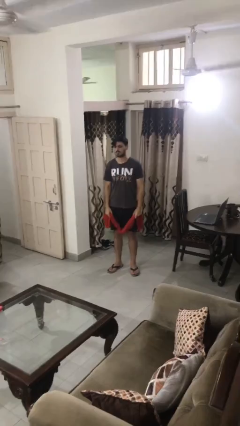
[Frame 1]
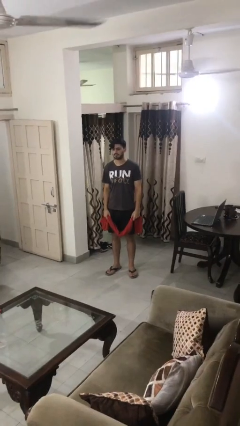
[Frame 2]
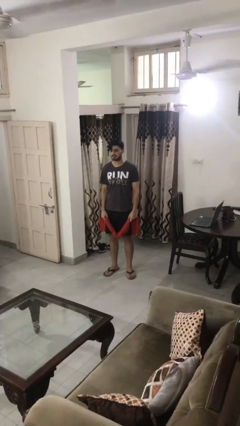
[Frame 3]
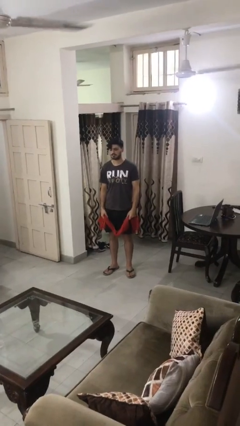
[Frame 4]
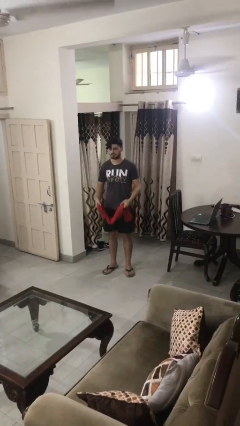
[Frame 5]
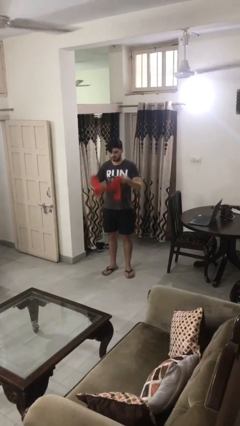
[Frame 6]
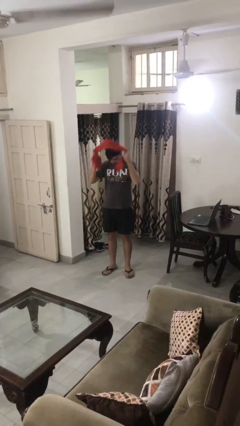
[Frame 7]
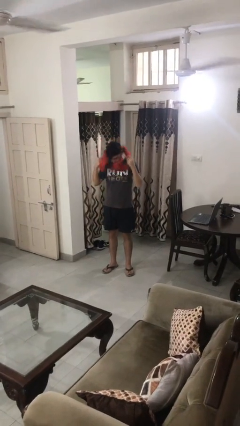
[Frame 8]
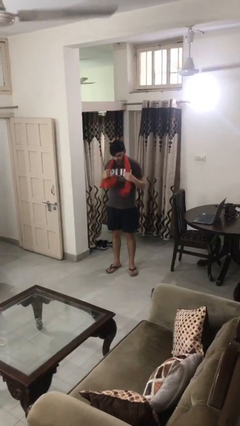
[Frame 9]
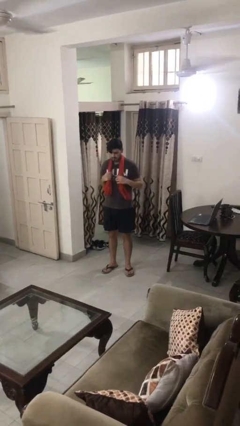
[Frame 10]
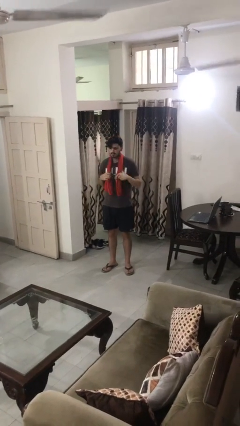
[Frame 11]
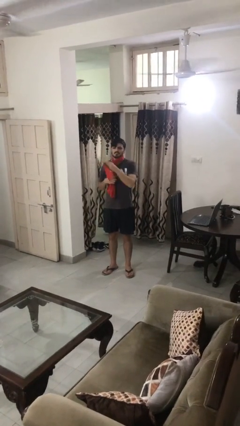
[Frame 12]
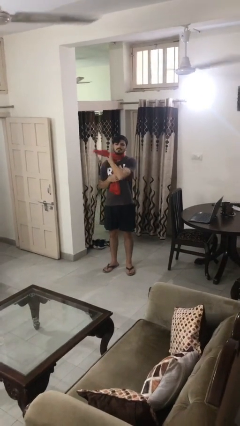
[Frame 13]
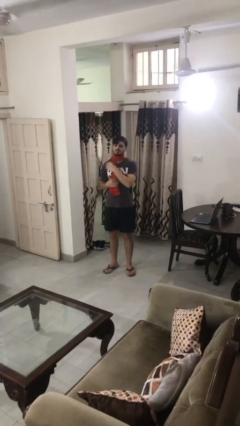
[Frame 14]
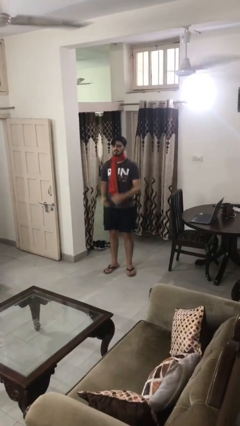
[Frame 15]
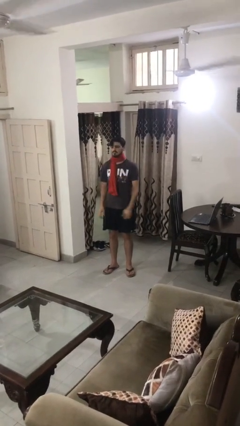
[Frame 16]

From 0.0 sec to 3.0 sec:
person puts on scarf

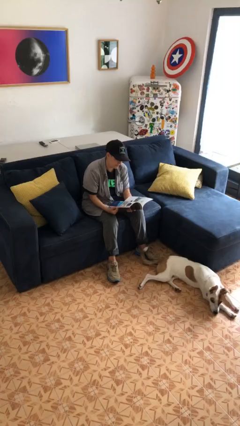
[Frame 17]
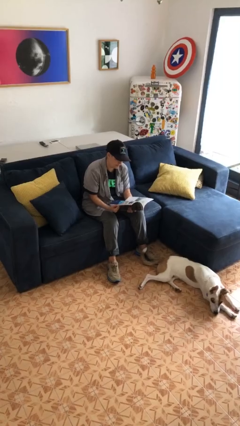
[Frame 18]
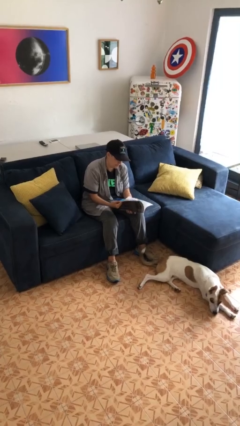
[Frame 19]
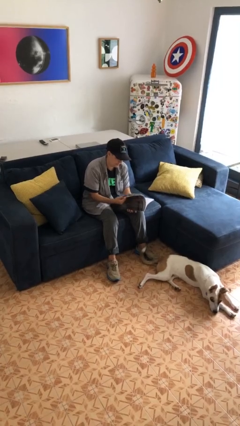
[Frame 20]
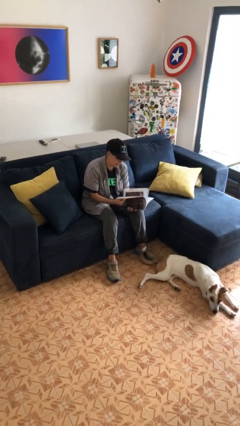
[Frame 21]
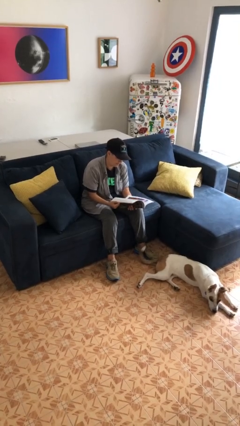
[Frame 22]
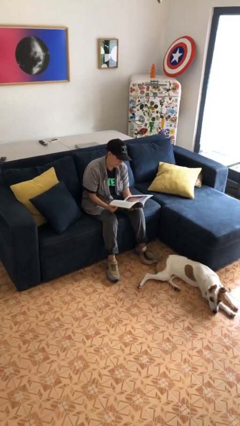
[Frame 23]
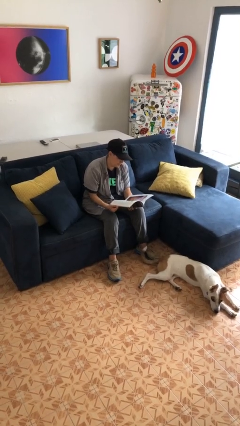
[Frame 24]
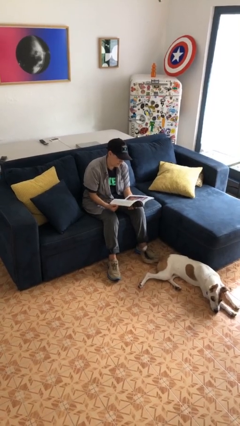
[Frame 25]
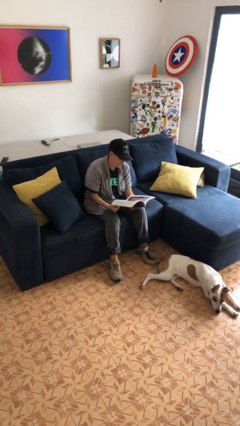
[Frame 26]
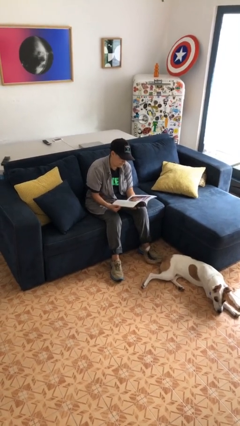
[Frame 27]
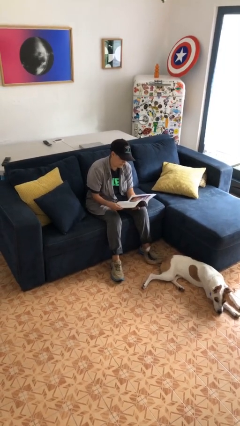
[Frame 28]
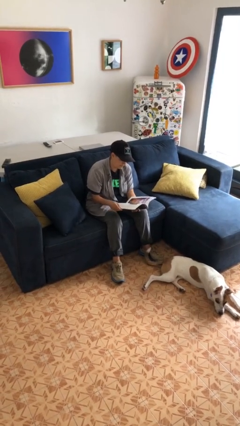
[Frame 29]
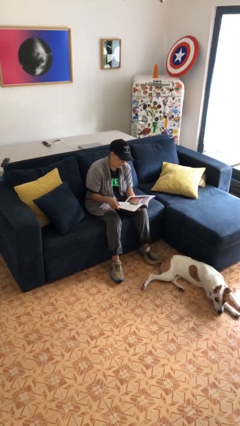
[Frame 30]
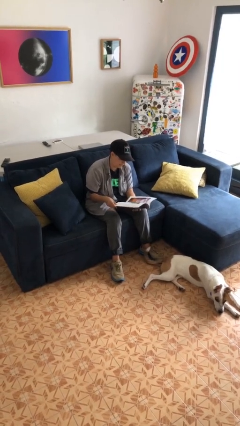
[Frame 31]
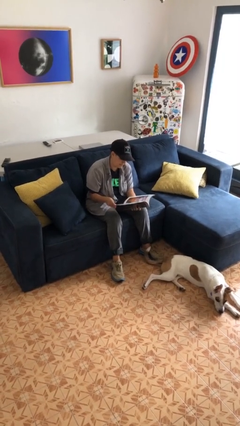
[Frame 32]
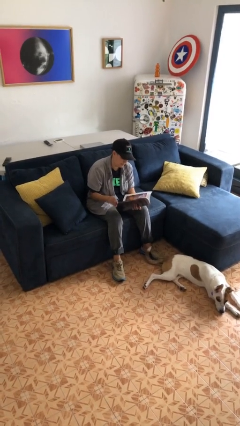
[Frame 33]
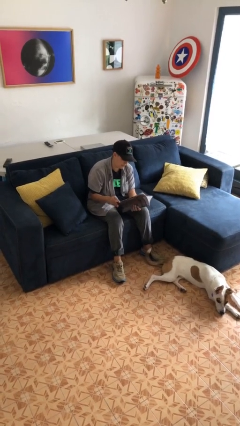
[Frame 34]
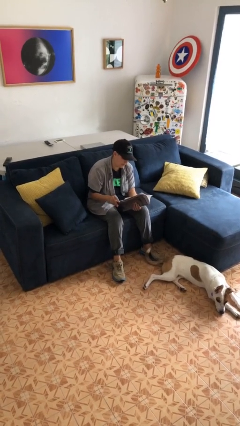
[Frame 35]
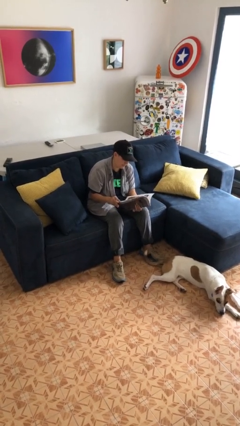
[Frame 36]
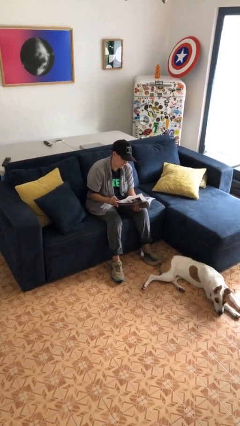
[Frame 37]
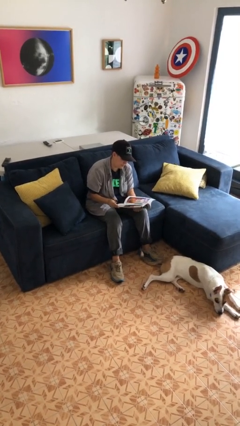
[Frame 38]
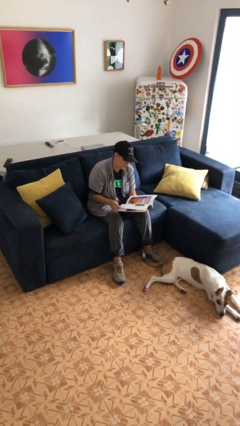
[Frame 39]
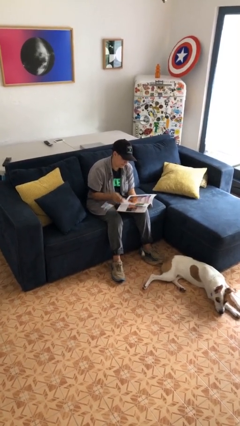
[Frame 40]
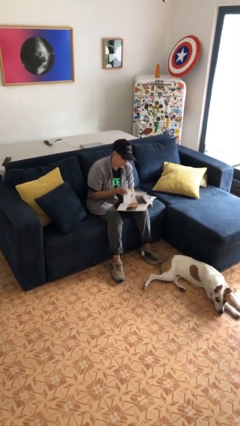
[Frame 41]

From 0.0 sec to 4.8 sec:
person reads magazine

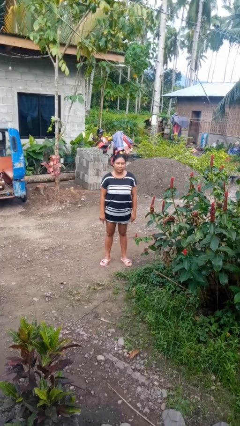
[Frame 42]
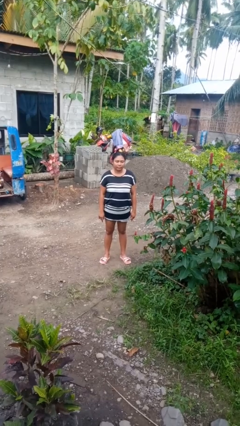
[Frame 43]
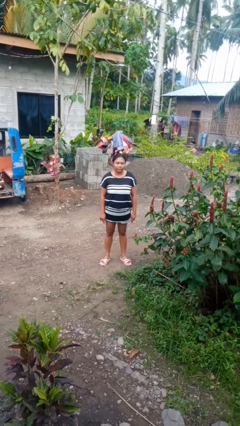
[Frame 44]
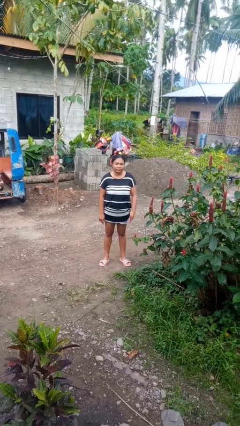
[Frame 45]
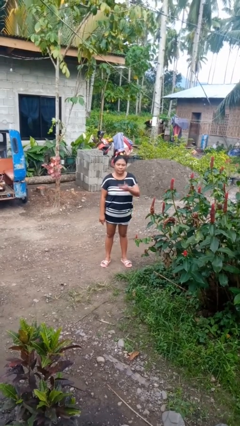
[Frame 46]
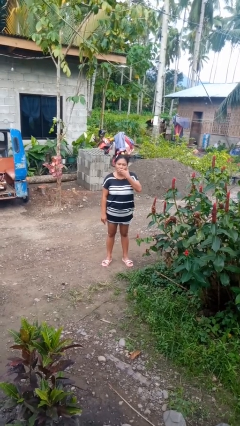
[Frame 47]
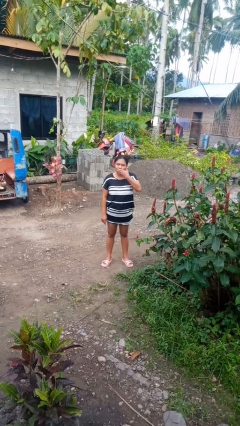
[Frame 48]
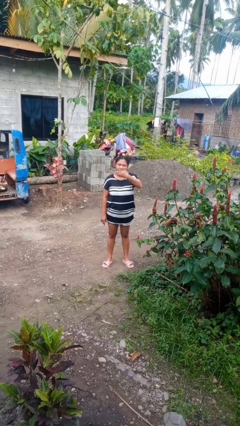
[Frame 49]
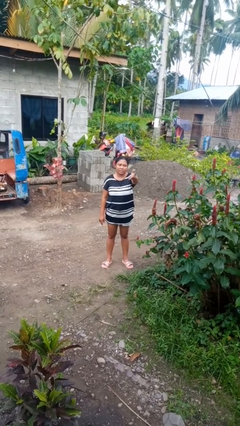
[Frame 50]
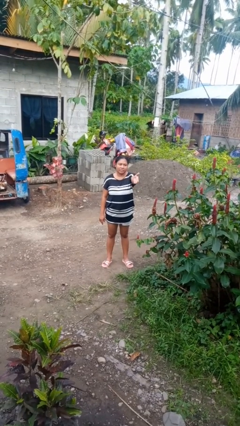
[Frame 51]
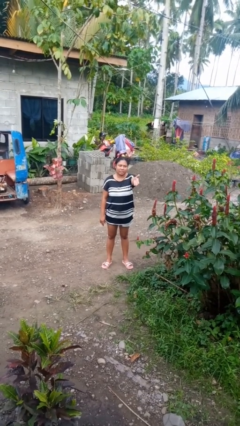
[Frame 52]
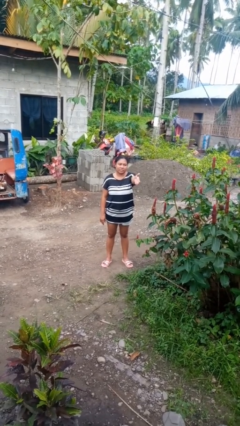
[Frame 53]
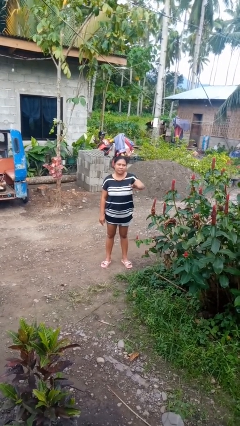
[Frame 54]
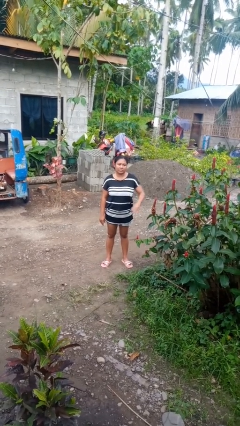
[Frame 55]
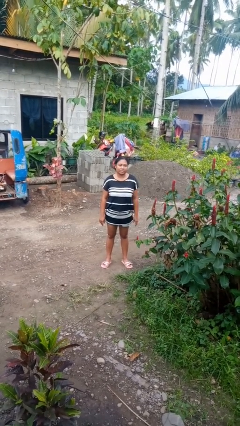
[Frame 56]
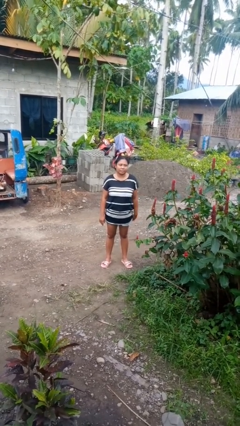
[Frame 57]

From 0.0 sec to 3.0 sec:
person gestures blow kiss

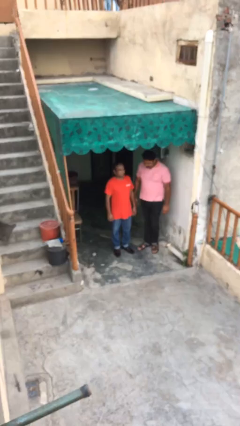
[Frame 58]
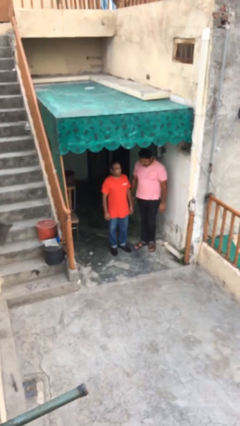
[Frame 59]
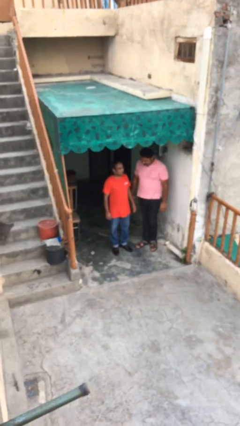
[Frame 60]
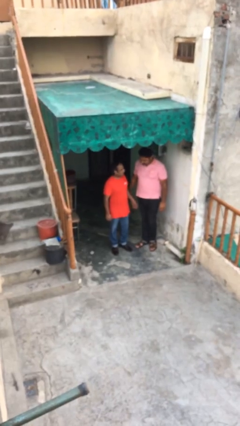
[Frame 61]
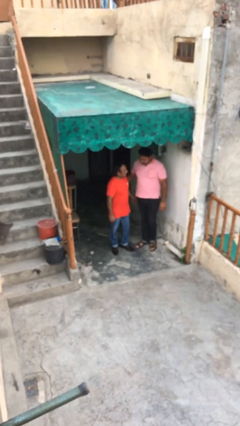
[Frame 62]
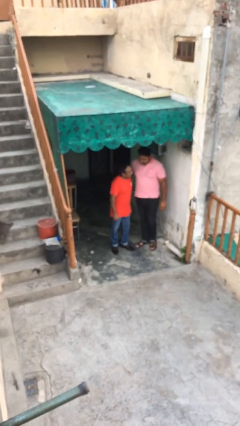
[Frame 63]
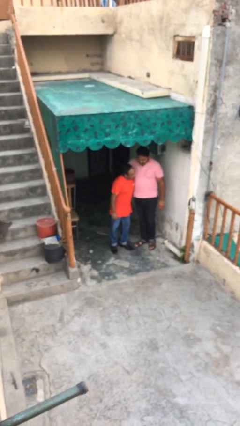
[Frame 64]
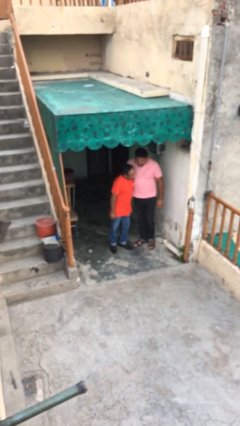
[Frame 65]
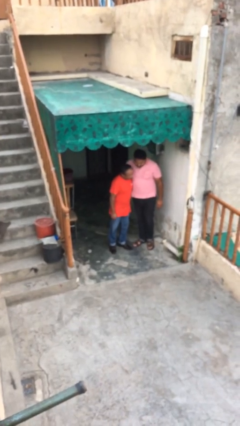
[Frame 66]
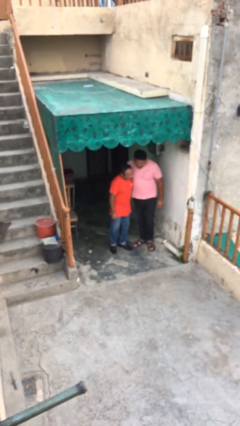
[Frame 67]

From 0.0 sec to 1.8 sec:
person embraces person

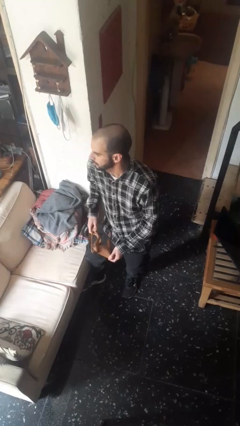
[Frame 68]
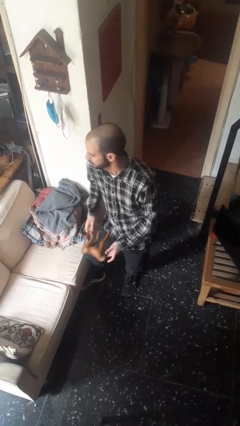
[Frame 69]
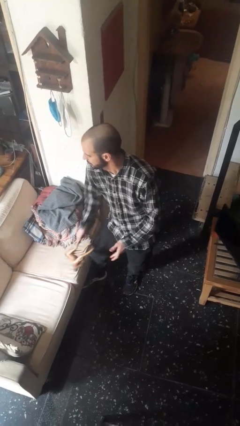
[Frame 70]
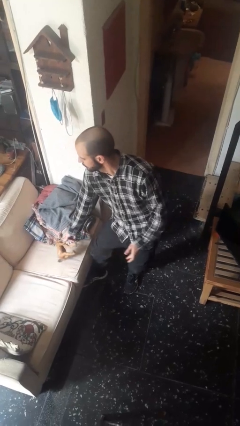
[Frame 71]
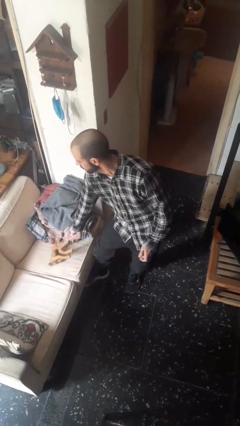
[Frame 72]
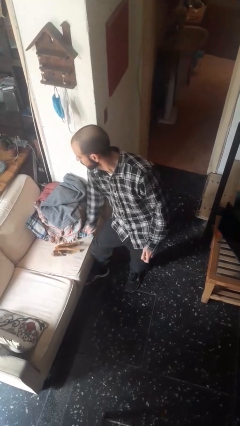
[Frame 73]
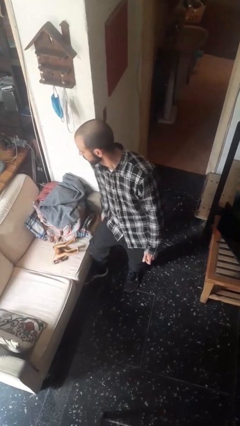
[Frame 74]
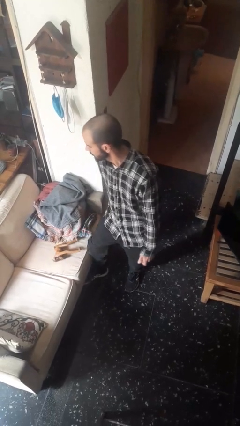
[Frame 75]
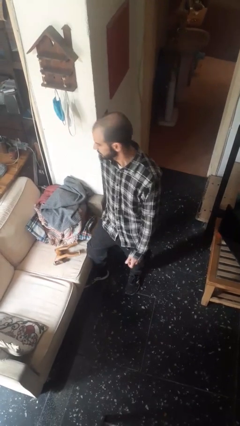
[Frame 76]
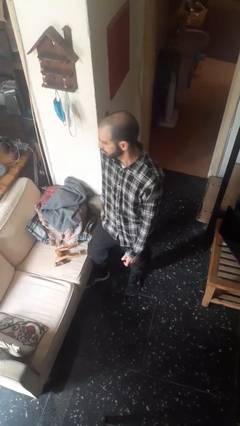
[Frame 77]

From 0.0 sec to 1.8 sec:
person puts down object on couch

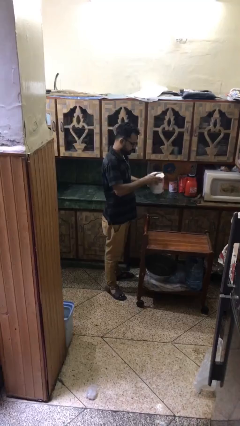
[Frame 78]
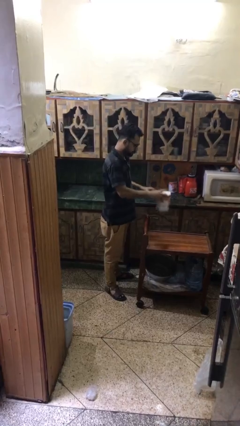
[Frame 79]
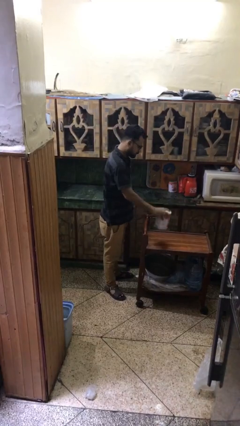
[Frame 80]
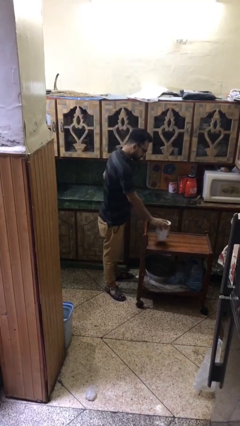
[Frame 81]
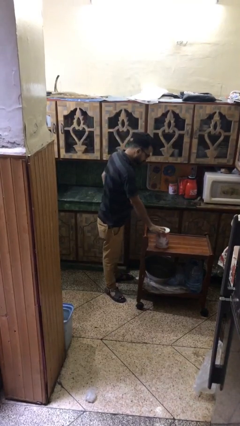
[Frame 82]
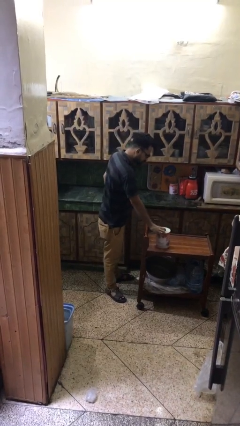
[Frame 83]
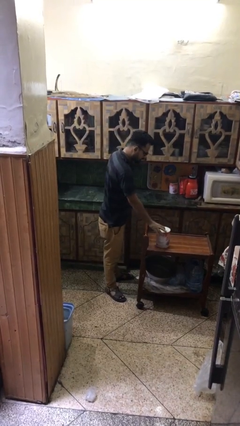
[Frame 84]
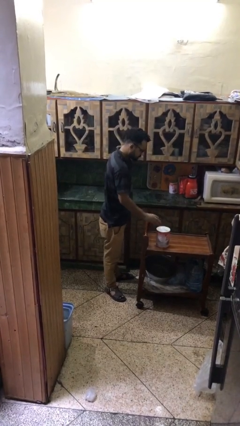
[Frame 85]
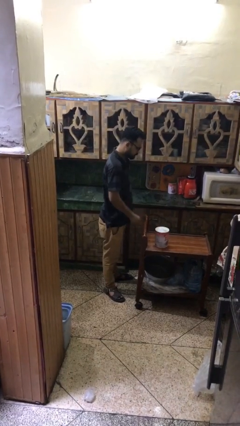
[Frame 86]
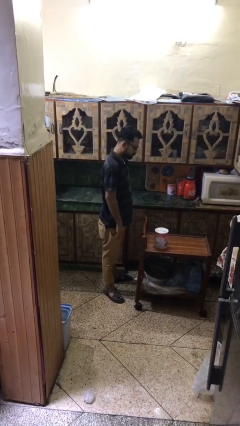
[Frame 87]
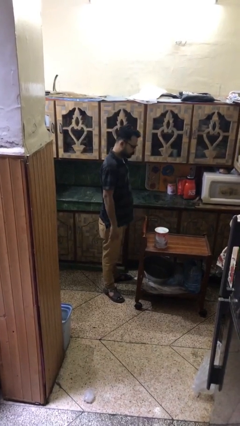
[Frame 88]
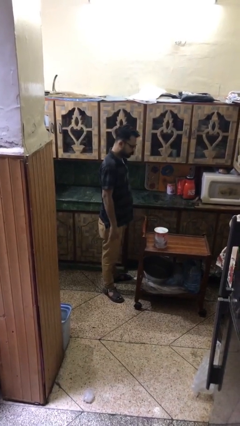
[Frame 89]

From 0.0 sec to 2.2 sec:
person puts down object on table

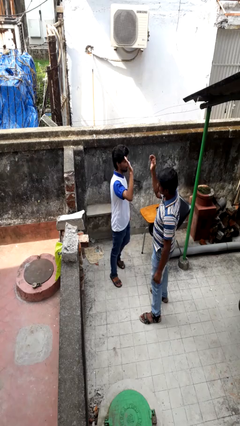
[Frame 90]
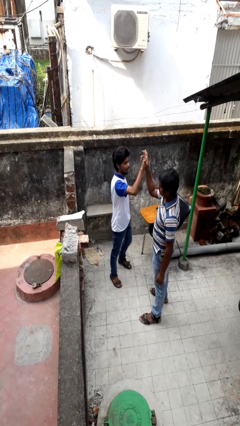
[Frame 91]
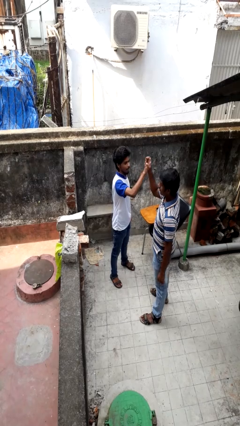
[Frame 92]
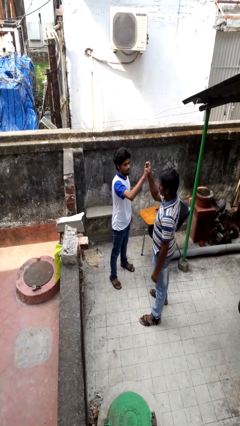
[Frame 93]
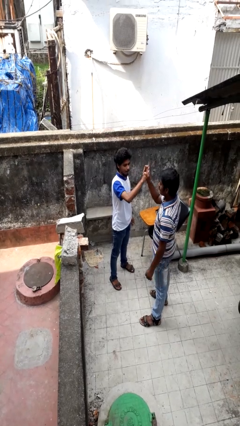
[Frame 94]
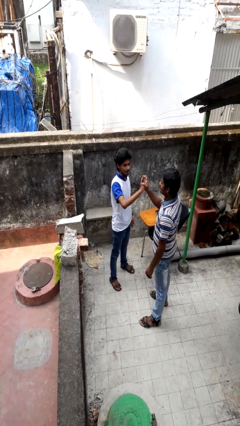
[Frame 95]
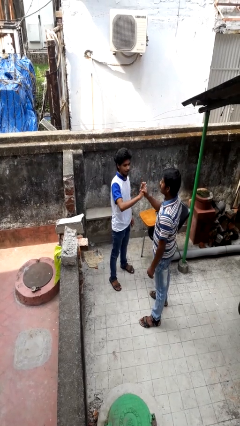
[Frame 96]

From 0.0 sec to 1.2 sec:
person highfives hand
